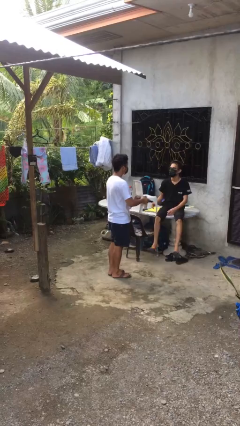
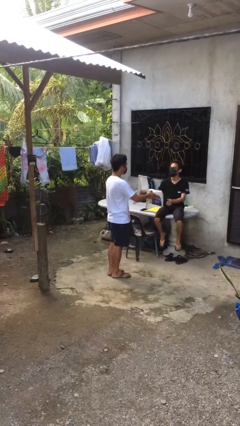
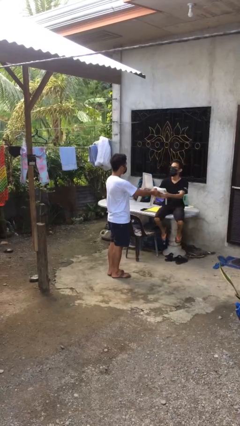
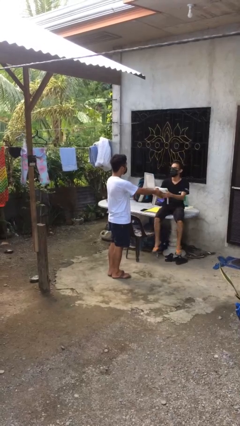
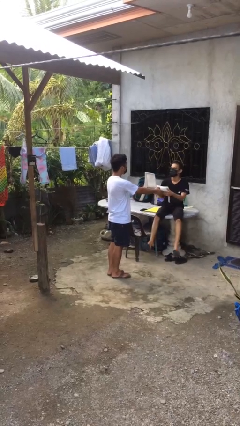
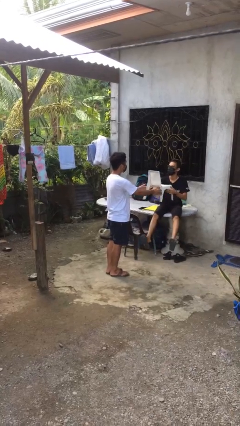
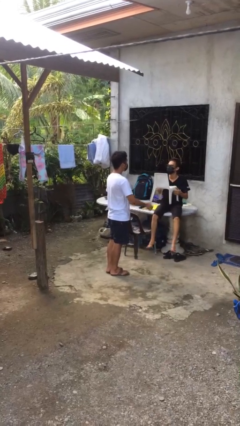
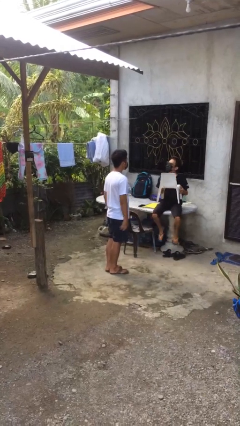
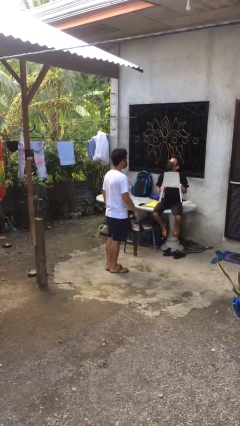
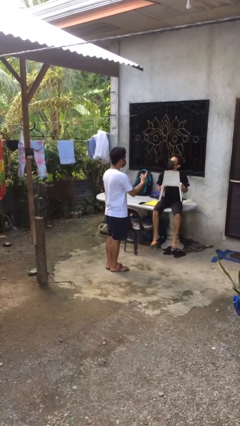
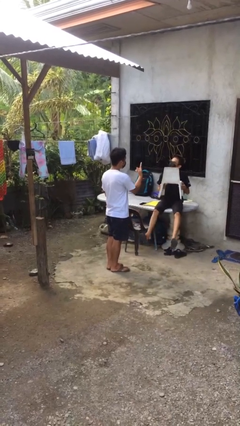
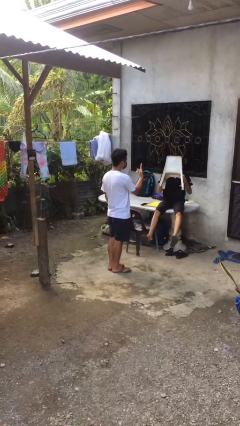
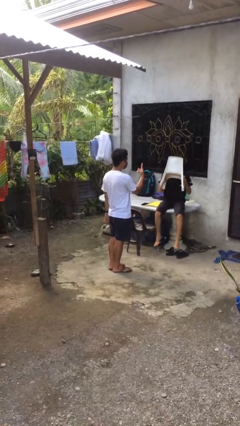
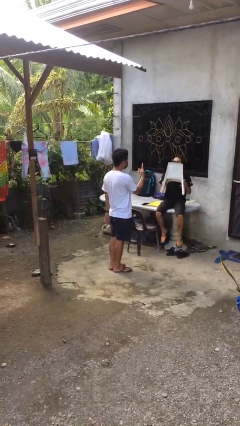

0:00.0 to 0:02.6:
person transfers object to person

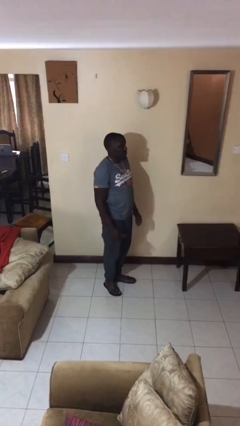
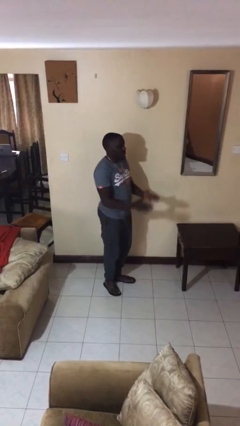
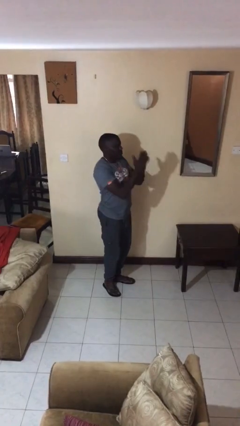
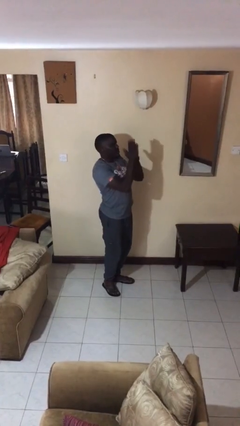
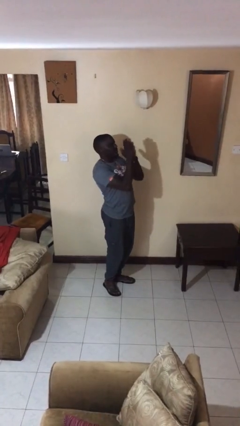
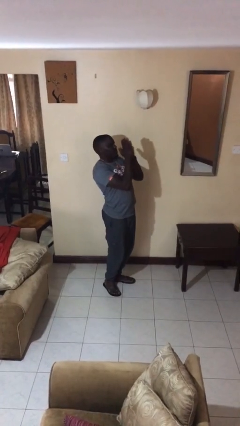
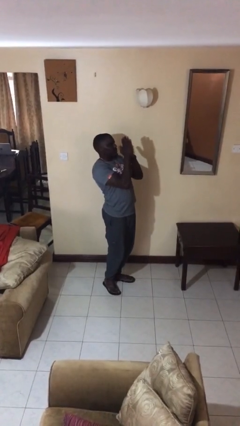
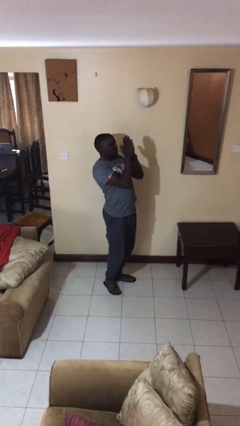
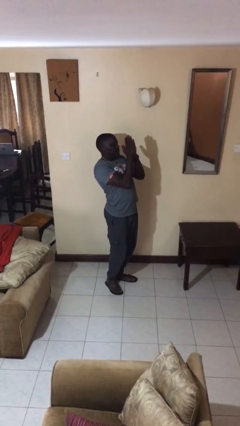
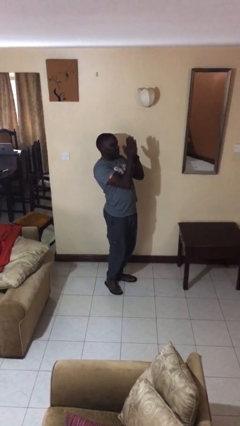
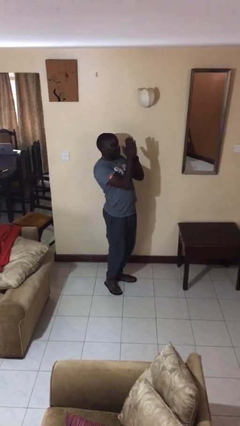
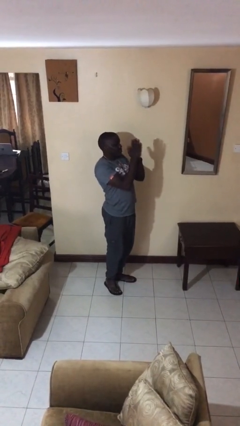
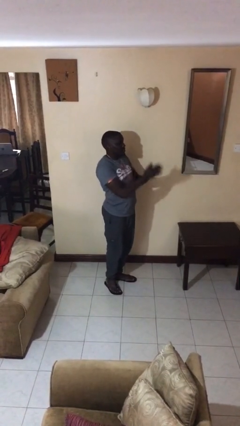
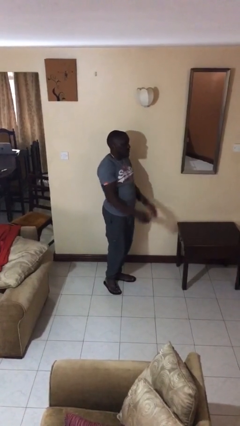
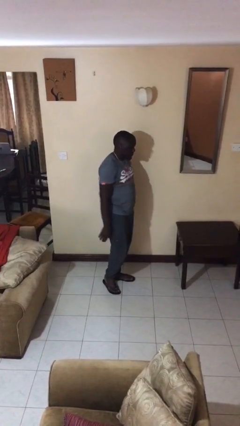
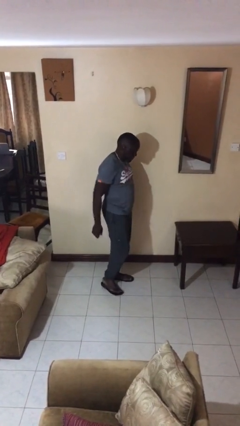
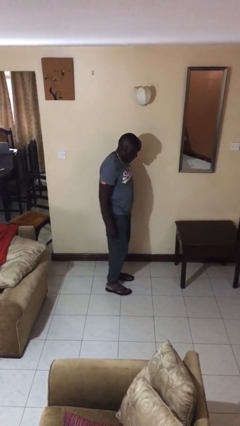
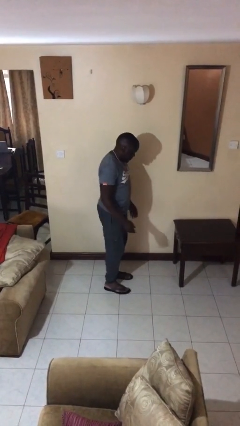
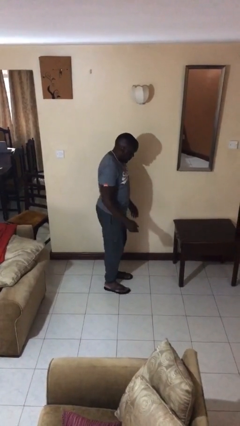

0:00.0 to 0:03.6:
person prays

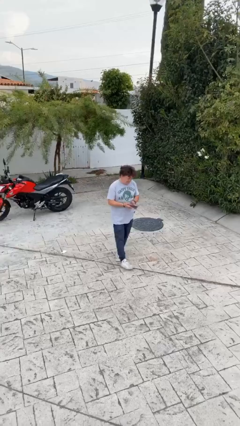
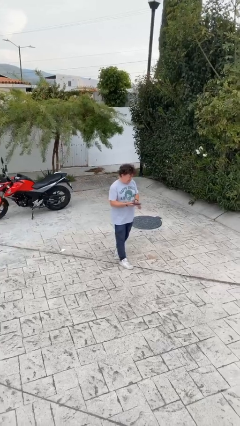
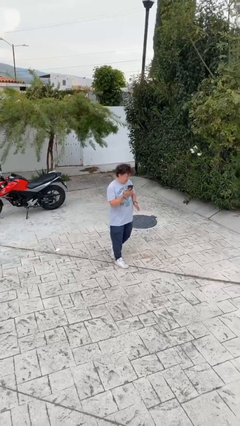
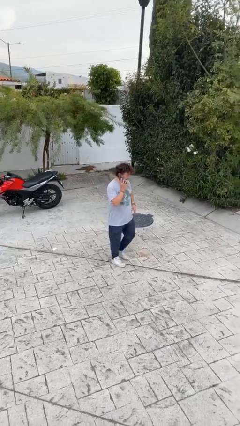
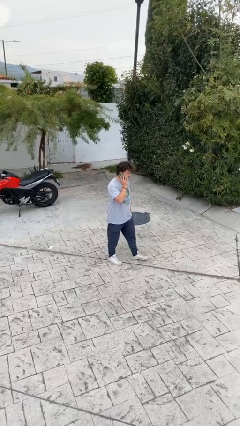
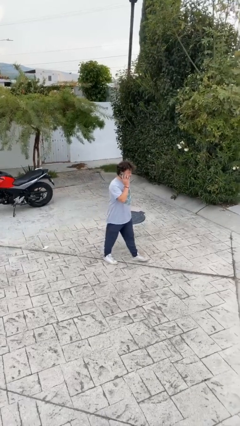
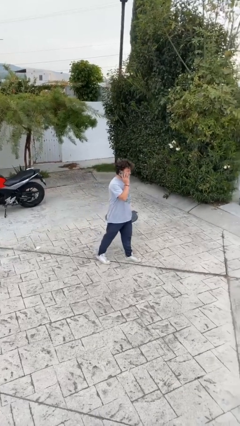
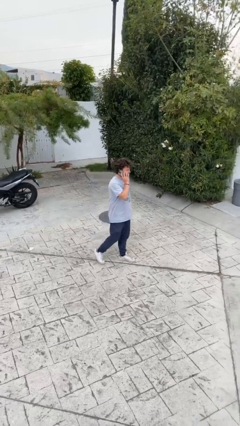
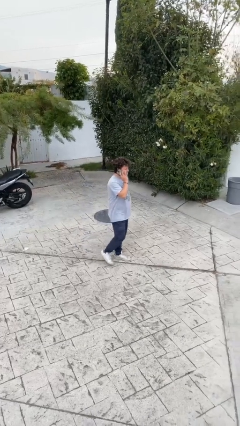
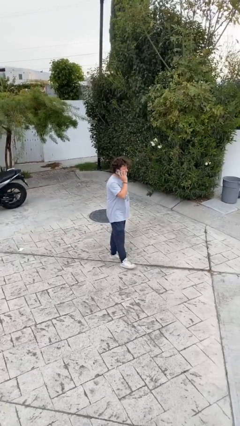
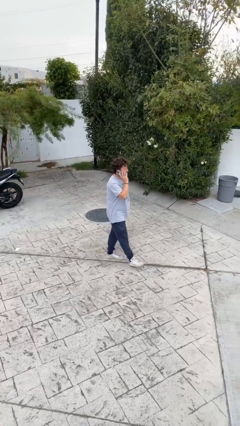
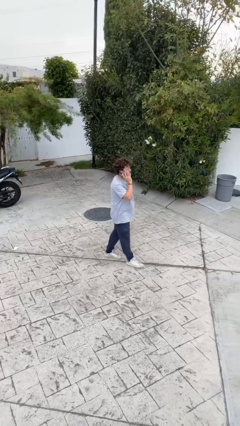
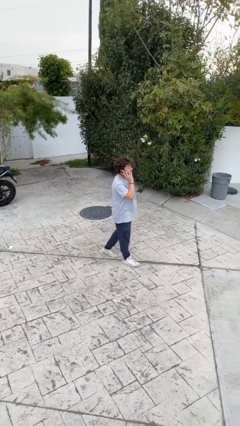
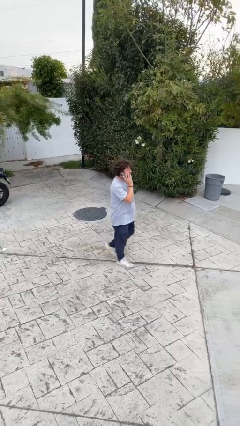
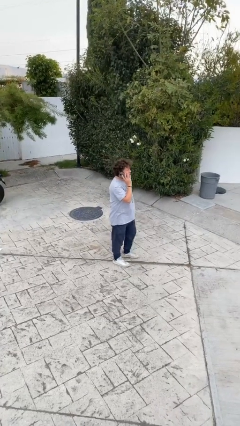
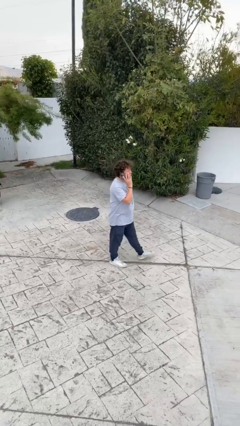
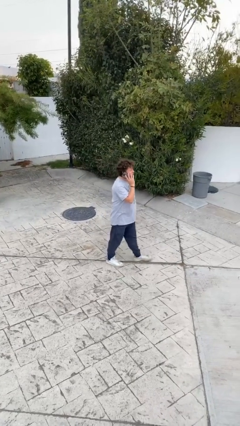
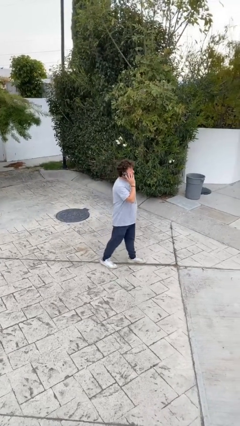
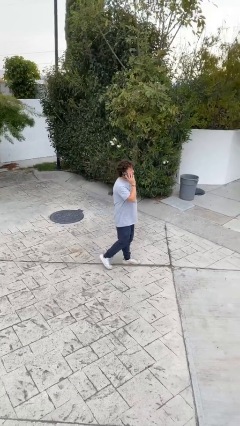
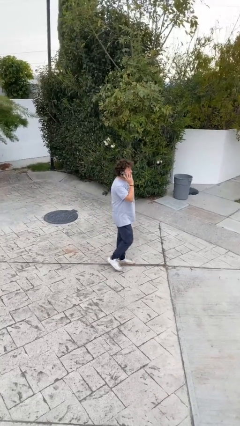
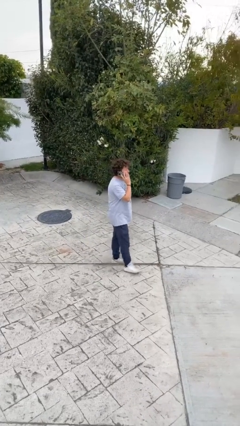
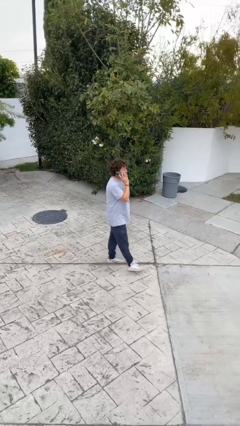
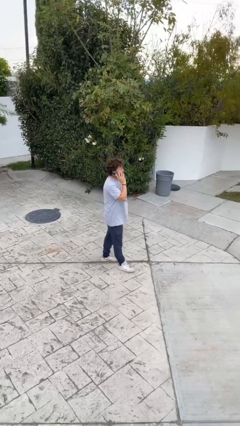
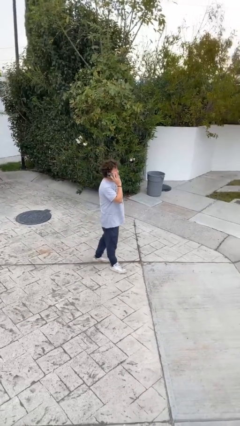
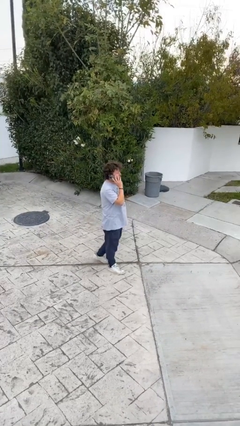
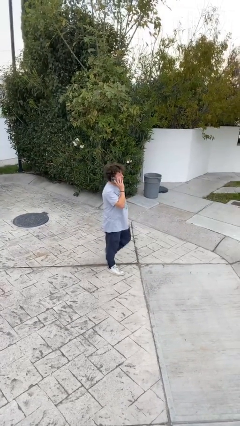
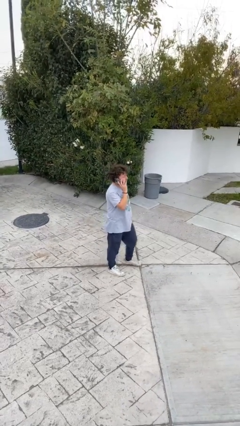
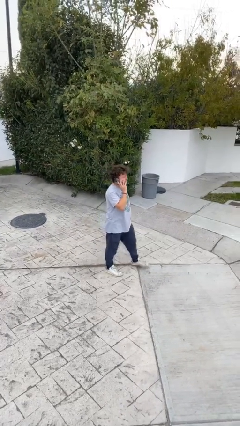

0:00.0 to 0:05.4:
person talks on phone

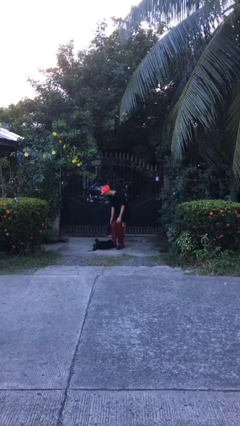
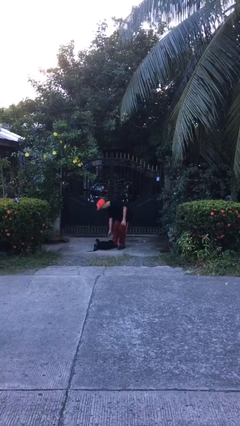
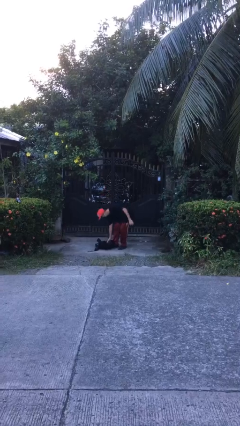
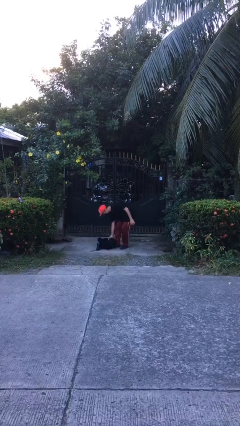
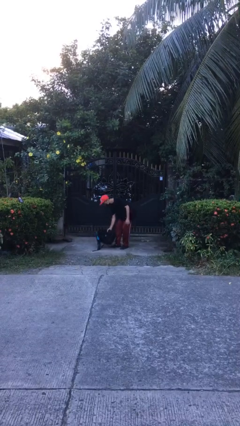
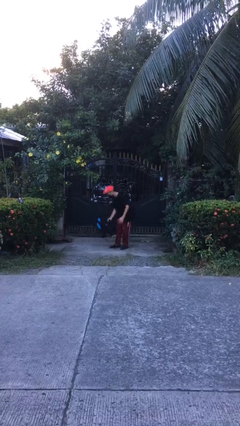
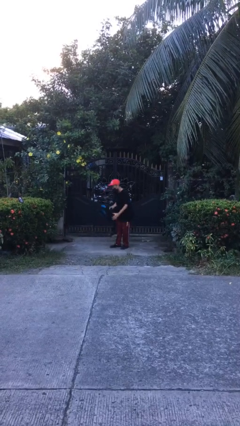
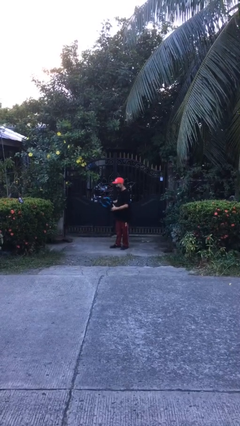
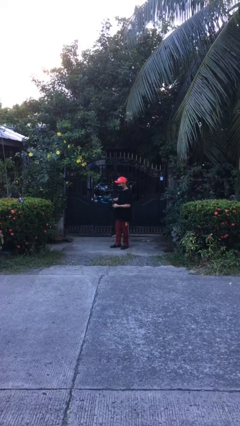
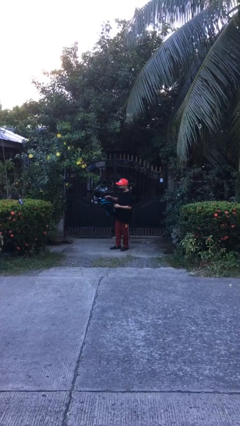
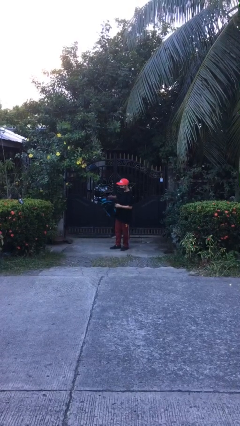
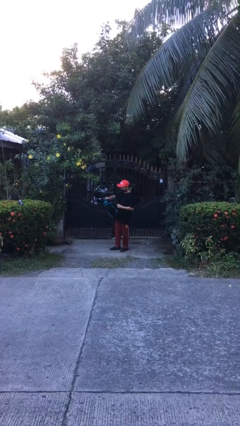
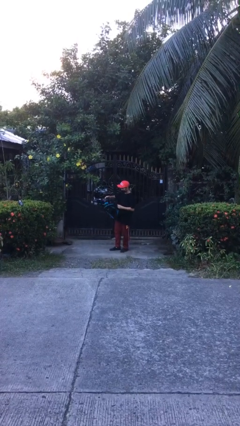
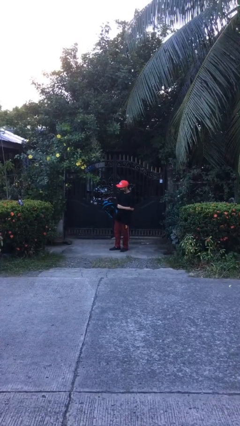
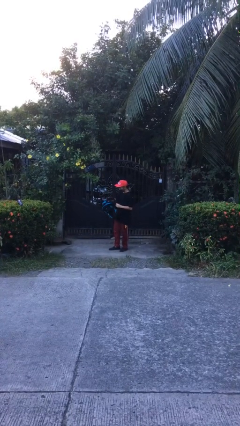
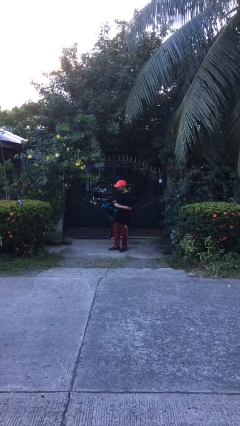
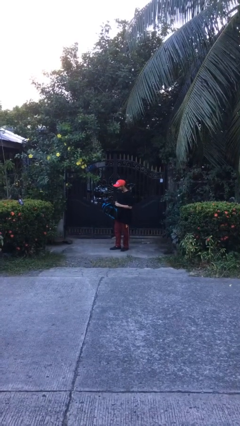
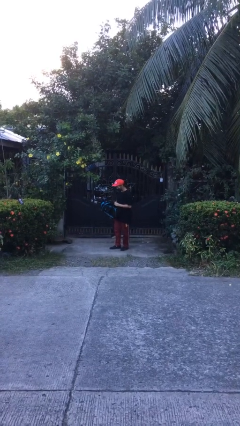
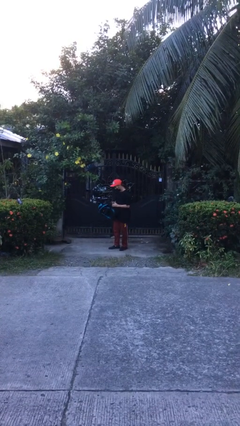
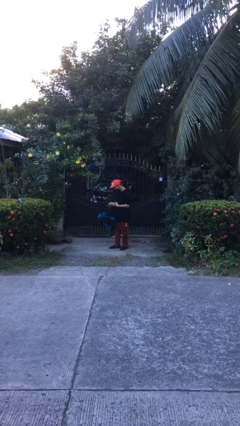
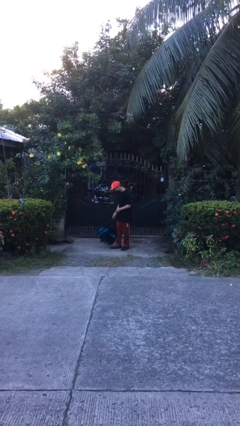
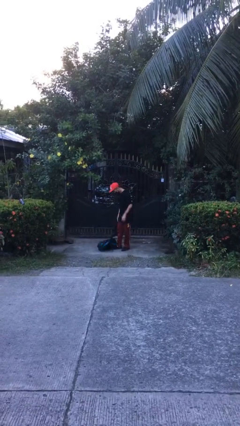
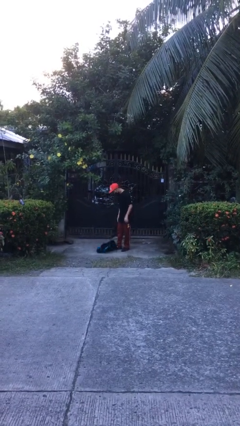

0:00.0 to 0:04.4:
person picks up object from floor

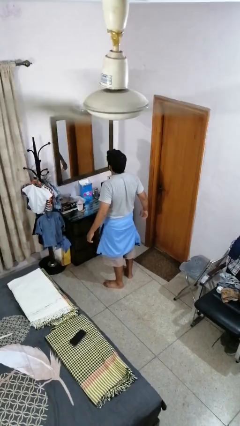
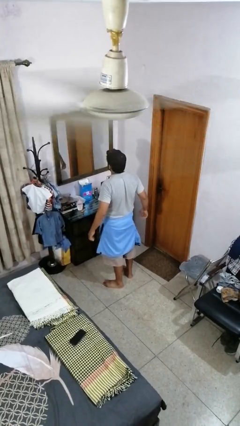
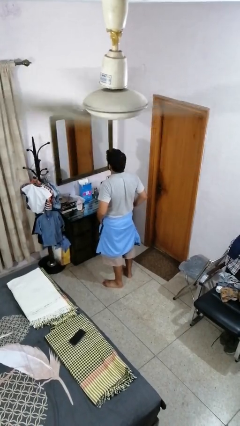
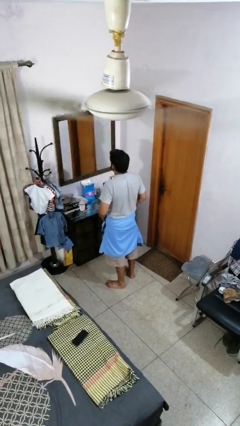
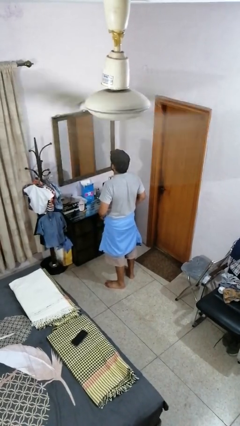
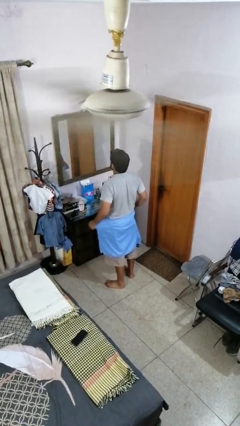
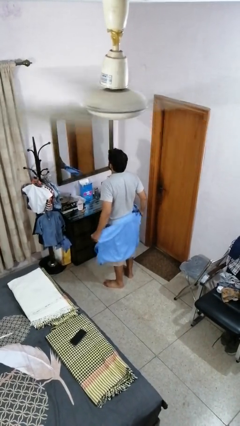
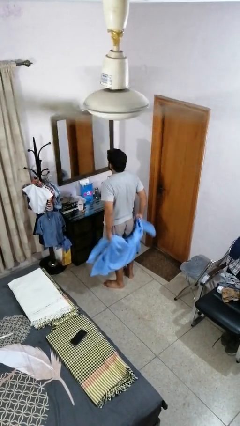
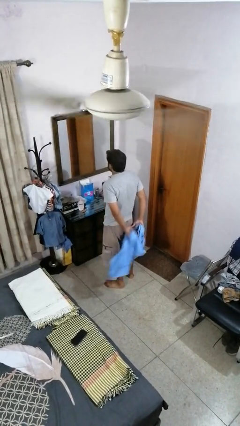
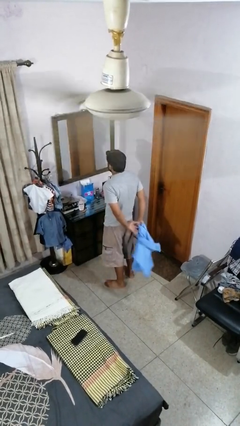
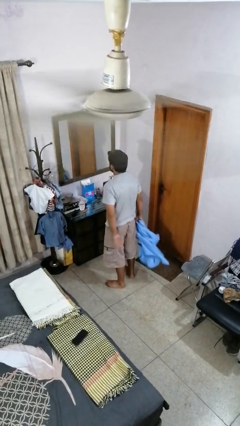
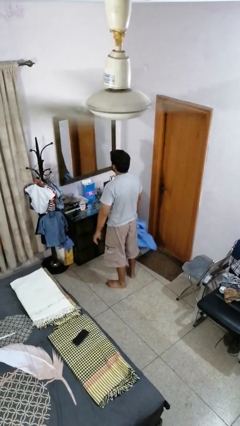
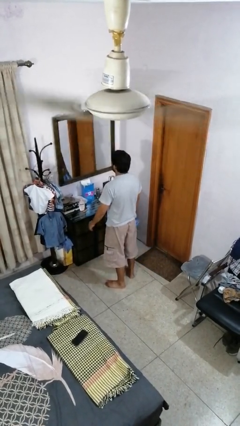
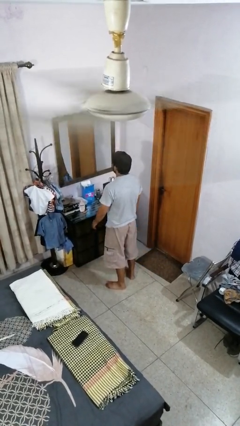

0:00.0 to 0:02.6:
person unties jacket around waist
